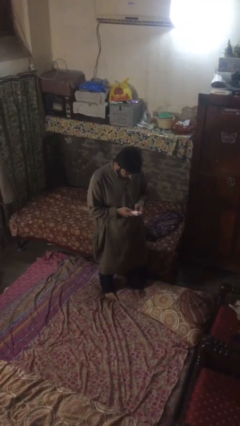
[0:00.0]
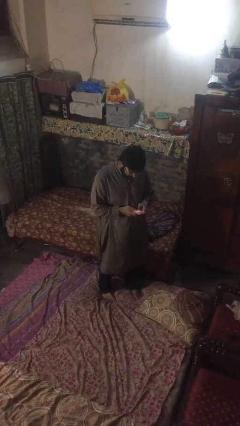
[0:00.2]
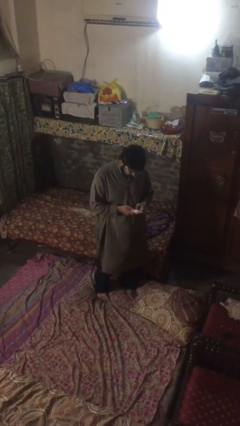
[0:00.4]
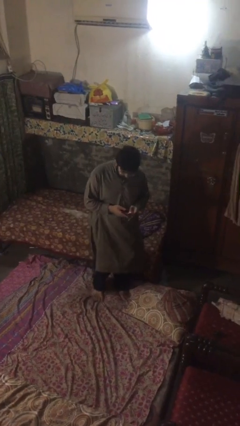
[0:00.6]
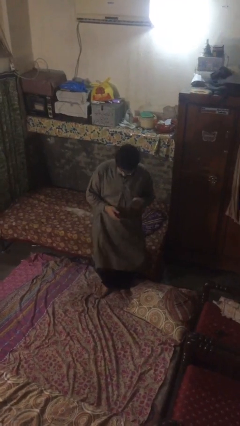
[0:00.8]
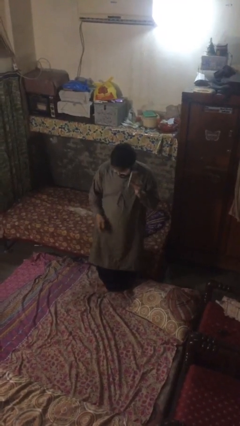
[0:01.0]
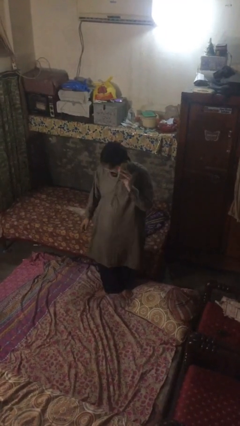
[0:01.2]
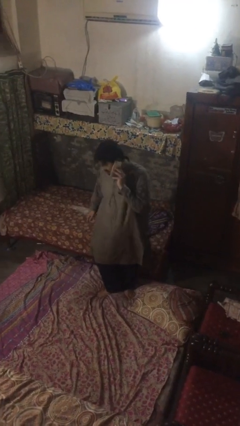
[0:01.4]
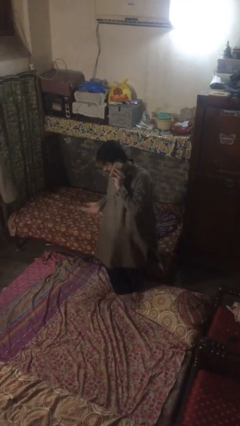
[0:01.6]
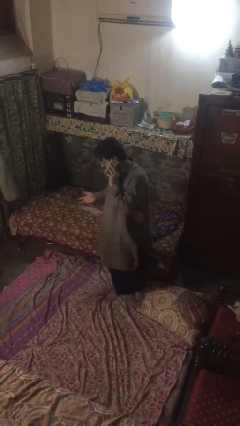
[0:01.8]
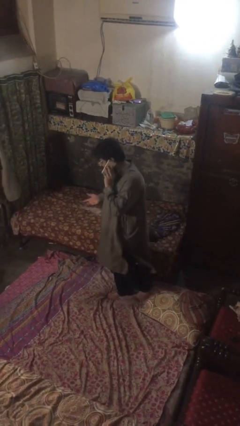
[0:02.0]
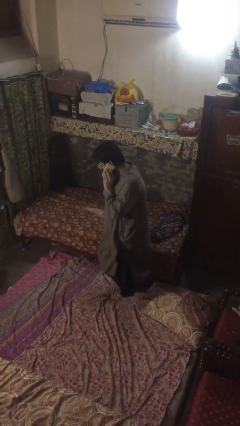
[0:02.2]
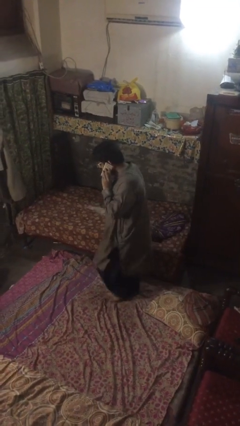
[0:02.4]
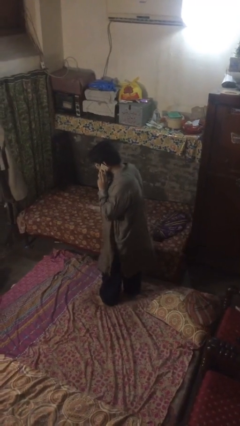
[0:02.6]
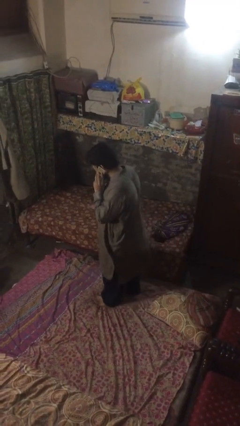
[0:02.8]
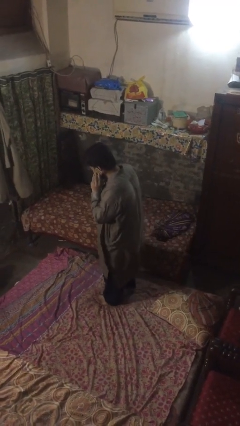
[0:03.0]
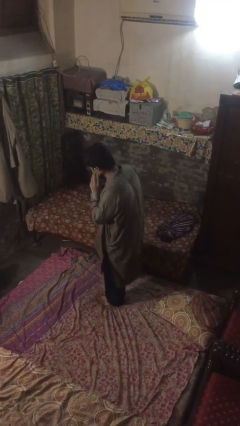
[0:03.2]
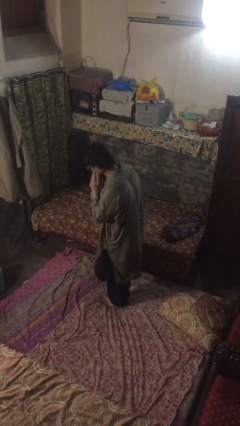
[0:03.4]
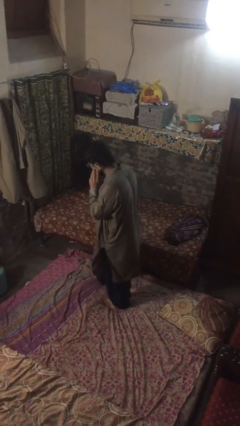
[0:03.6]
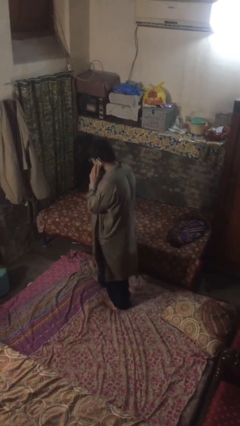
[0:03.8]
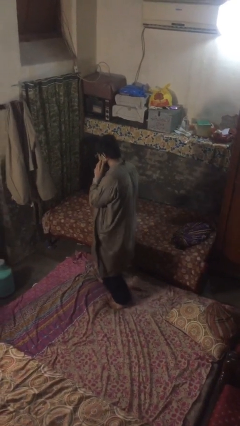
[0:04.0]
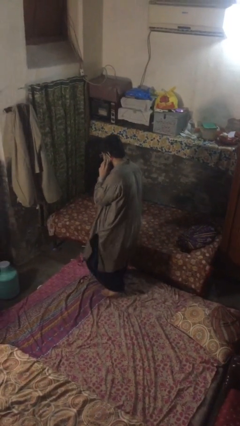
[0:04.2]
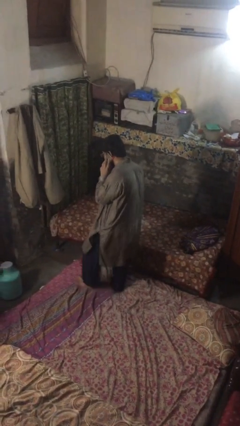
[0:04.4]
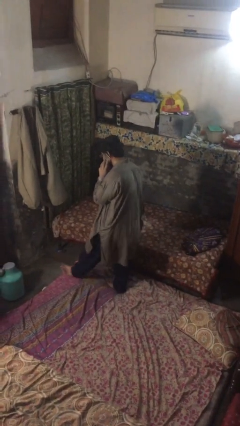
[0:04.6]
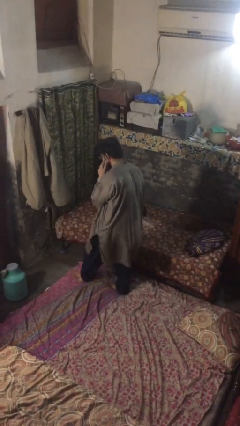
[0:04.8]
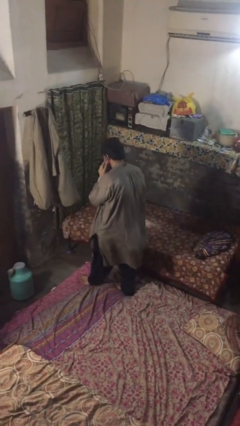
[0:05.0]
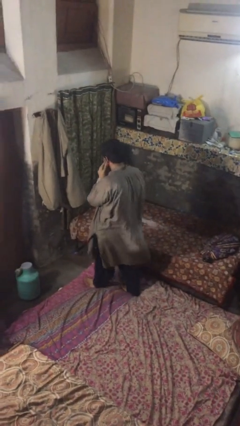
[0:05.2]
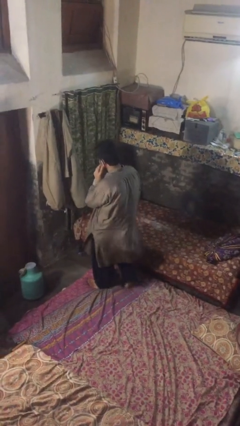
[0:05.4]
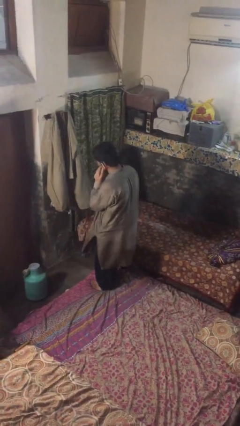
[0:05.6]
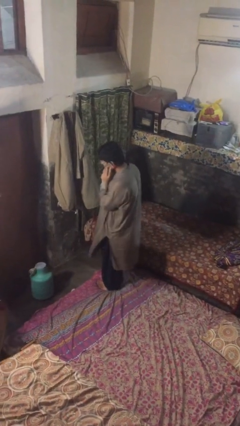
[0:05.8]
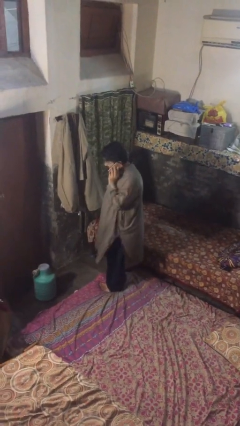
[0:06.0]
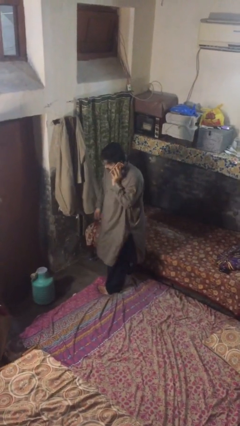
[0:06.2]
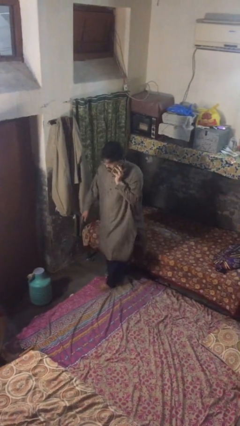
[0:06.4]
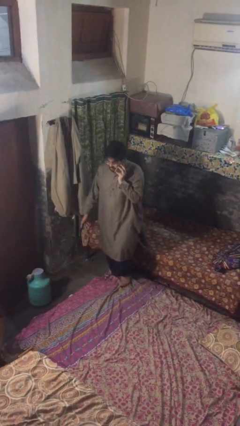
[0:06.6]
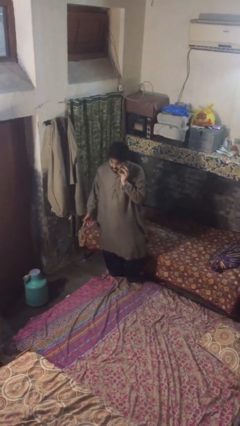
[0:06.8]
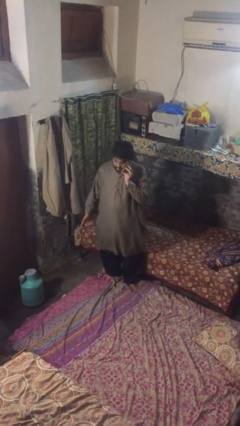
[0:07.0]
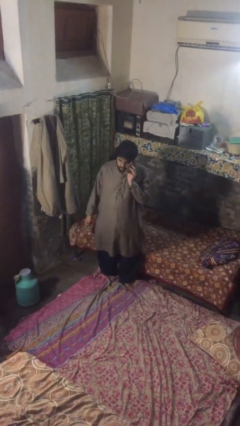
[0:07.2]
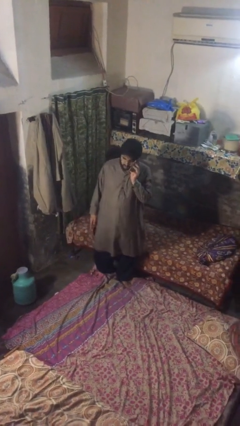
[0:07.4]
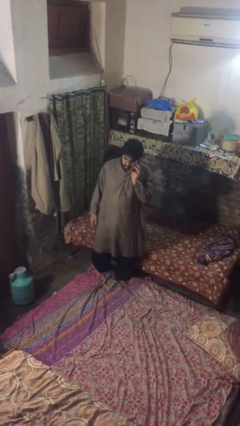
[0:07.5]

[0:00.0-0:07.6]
person talks on phone

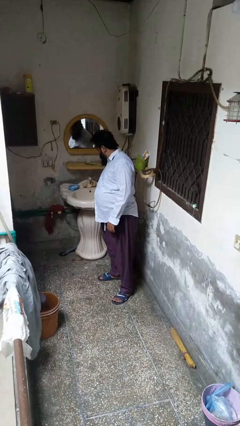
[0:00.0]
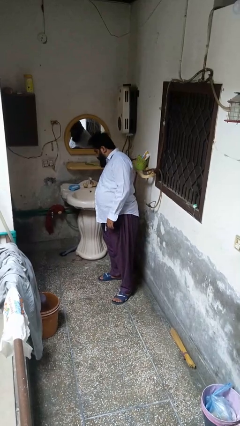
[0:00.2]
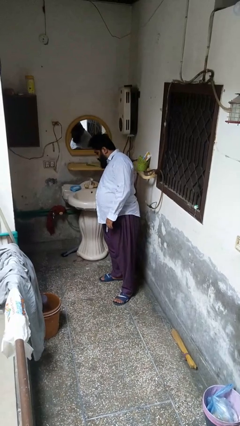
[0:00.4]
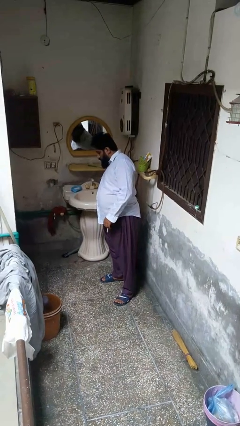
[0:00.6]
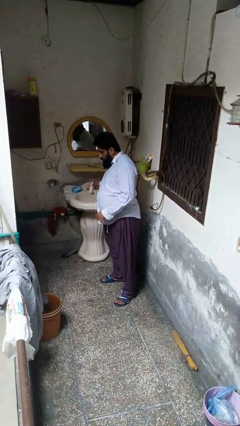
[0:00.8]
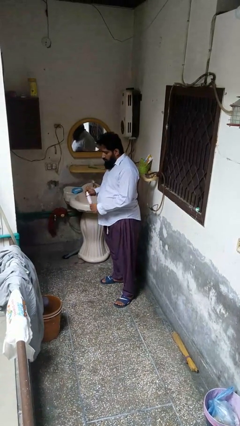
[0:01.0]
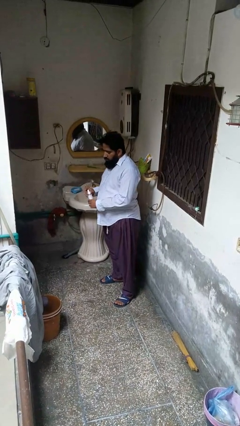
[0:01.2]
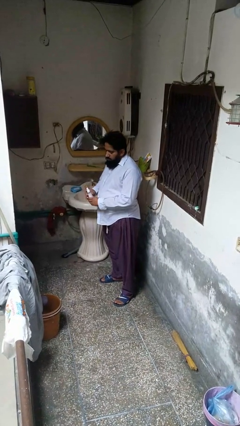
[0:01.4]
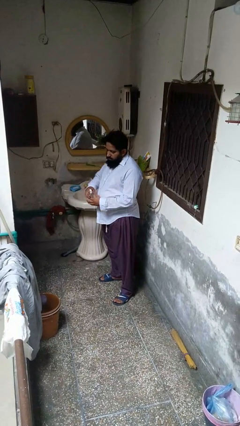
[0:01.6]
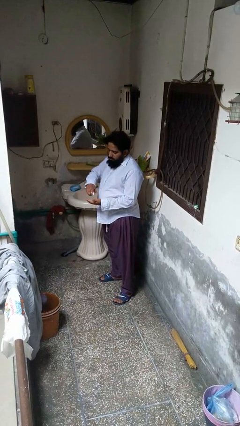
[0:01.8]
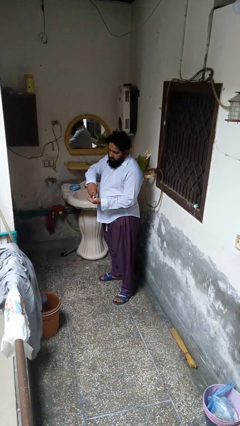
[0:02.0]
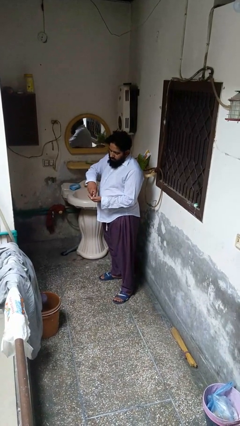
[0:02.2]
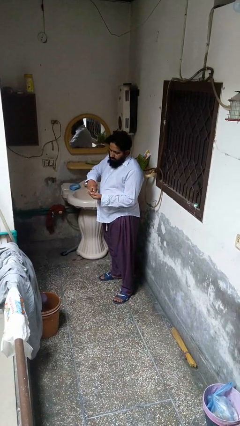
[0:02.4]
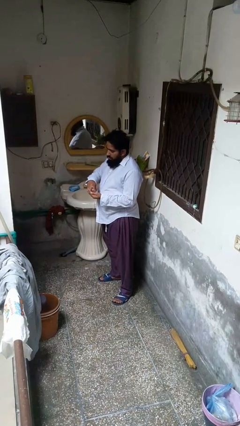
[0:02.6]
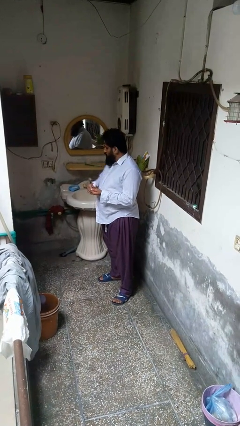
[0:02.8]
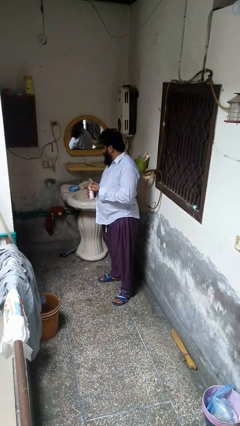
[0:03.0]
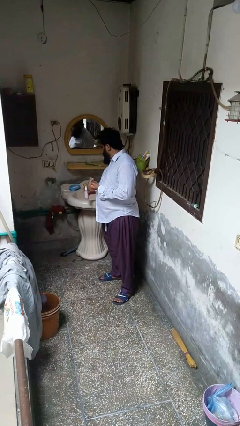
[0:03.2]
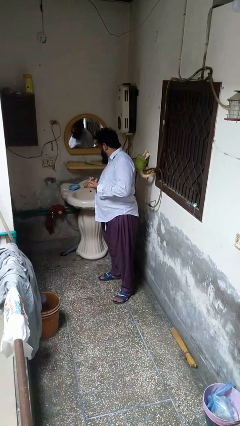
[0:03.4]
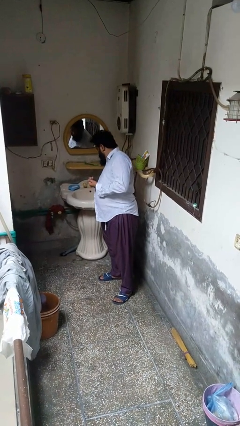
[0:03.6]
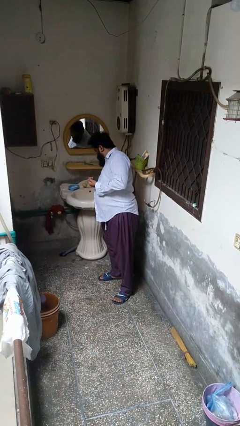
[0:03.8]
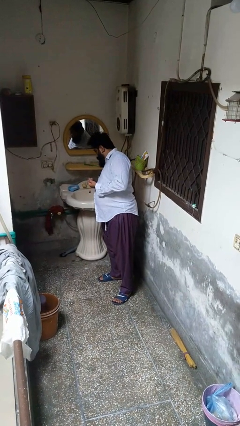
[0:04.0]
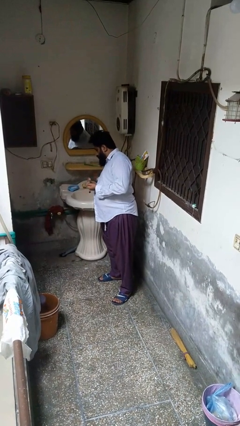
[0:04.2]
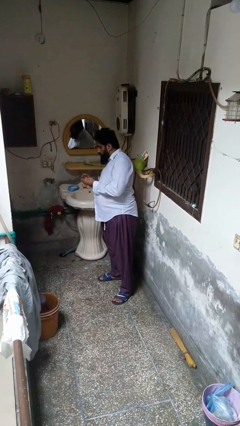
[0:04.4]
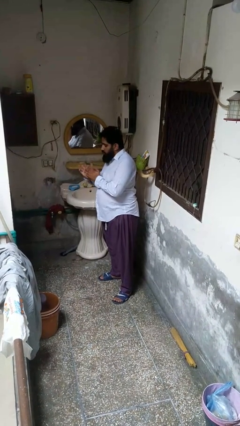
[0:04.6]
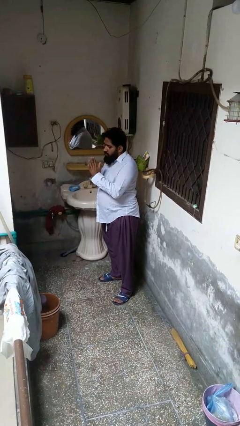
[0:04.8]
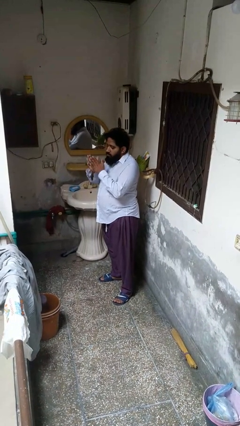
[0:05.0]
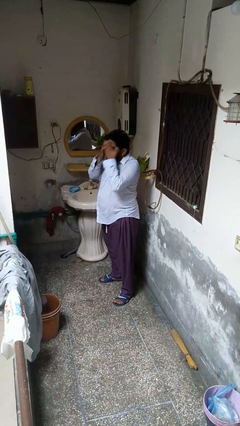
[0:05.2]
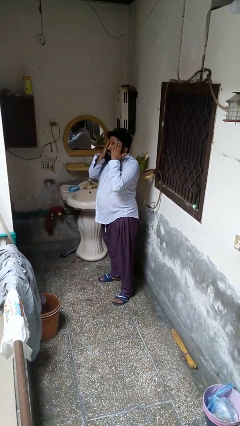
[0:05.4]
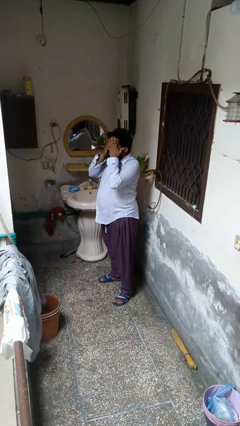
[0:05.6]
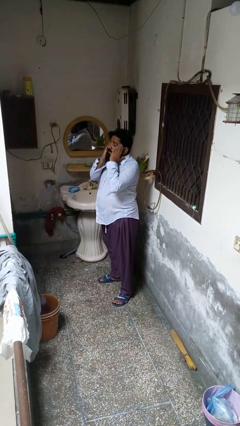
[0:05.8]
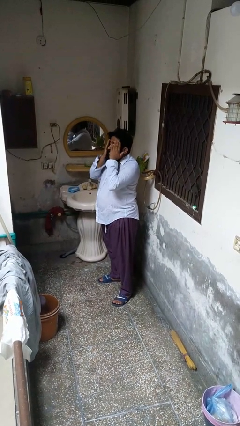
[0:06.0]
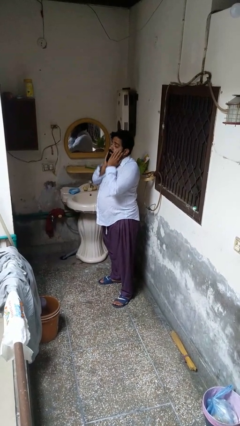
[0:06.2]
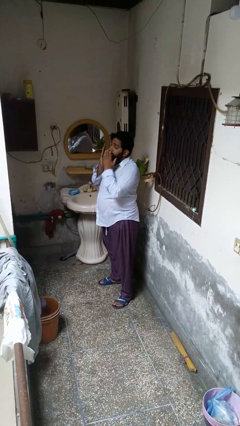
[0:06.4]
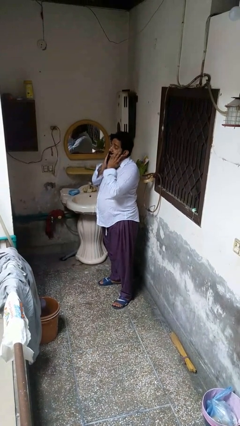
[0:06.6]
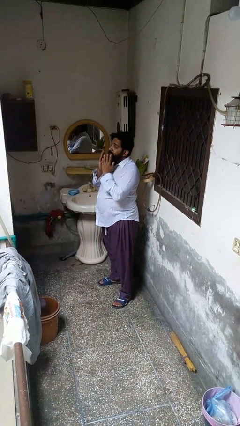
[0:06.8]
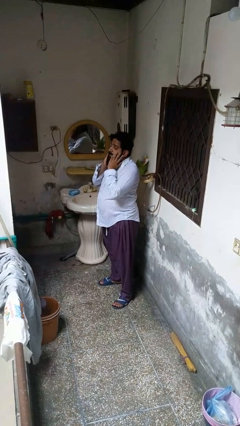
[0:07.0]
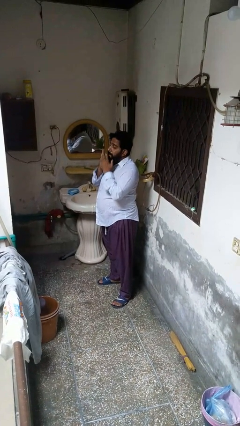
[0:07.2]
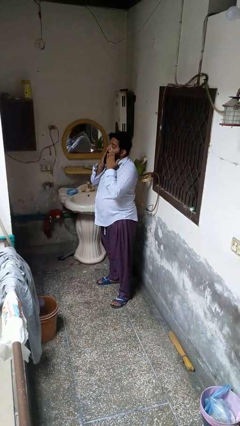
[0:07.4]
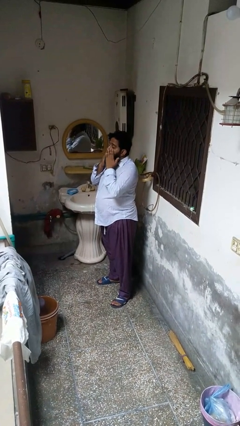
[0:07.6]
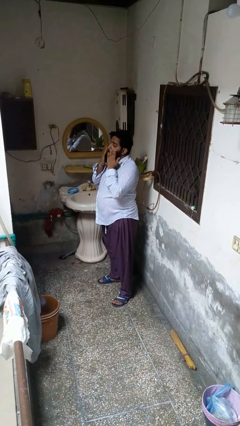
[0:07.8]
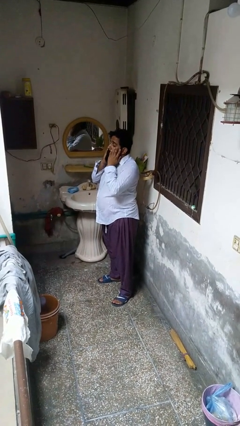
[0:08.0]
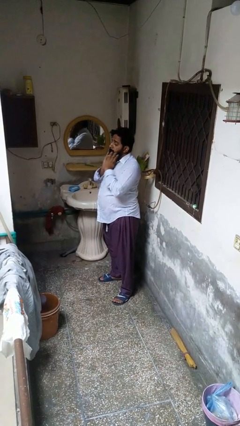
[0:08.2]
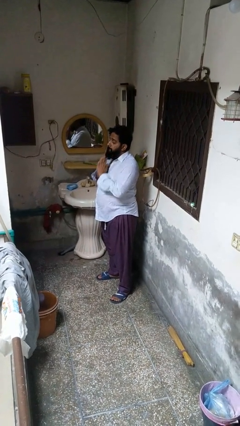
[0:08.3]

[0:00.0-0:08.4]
person applies sunscreen

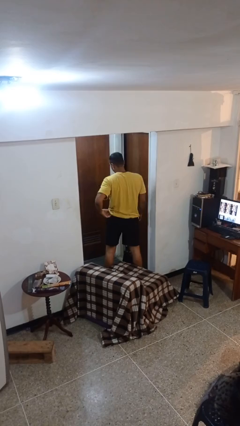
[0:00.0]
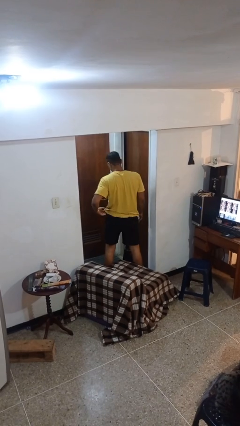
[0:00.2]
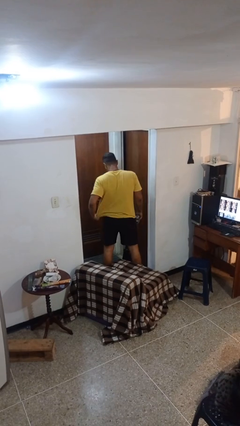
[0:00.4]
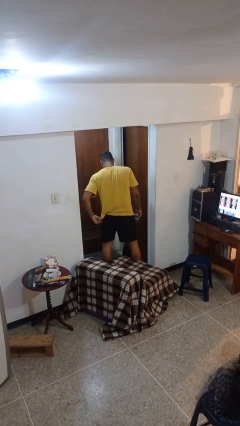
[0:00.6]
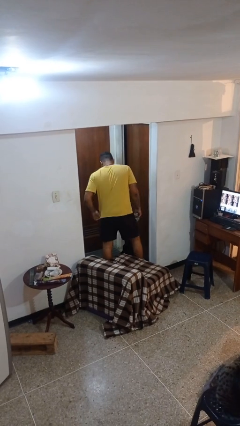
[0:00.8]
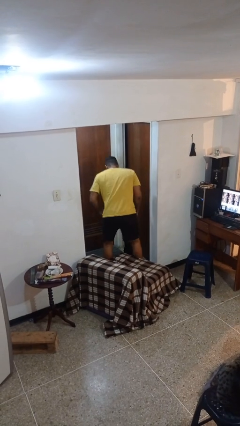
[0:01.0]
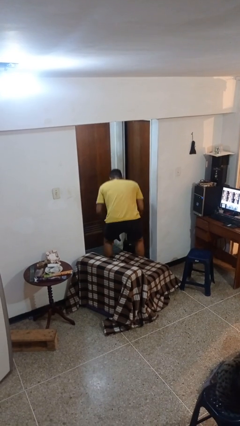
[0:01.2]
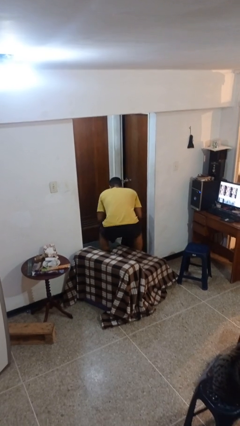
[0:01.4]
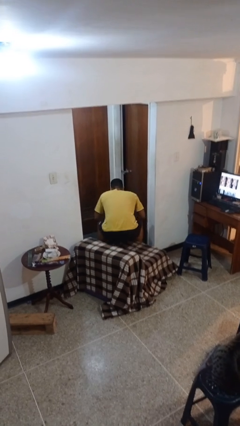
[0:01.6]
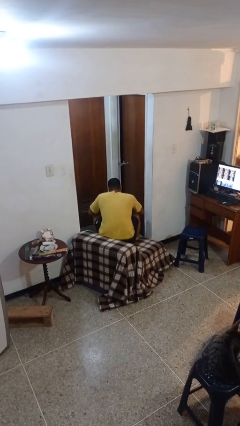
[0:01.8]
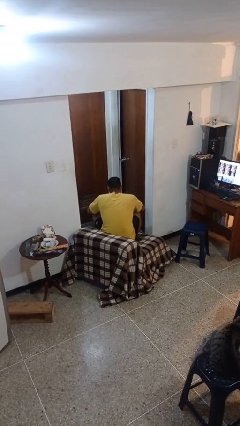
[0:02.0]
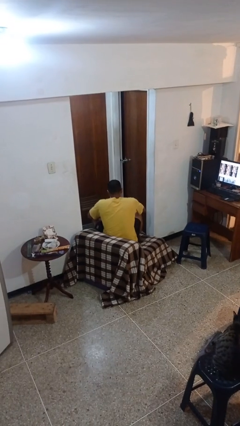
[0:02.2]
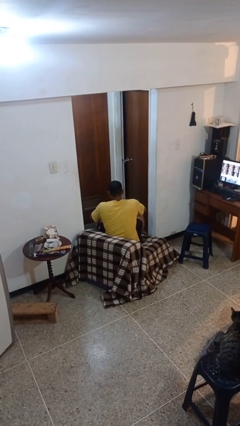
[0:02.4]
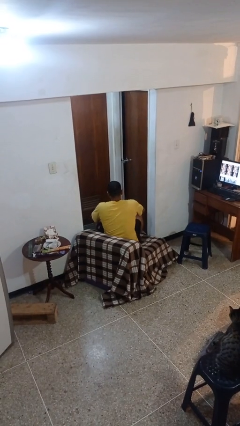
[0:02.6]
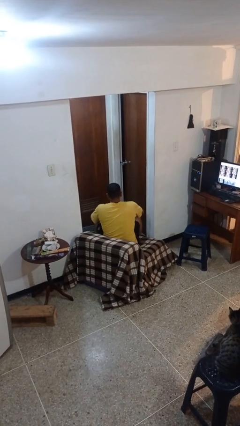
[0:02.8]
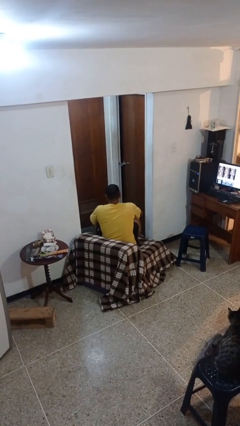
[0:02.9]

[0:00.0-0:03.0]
person lies down on couch
